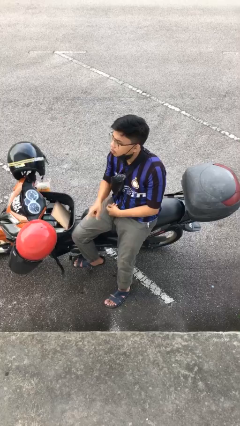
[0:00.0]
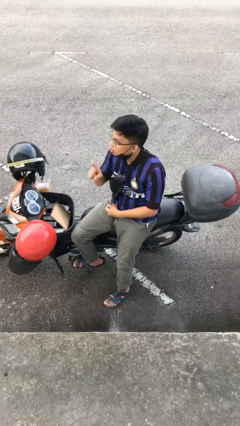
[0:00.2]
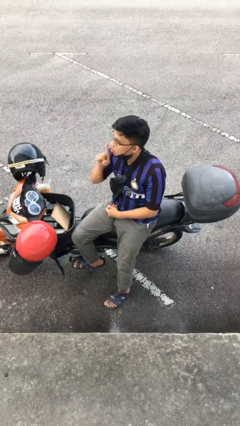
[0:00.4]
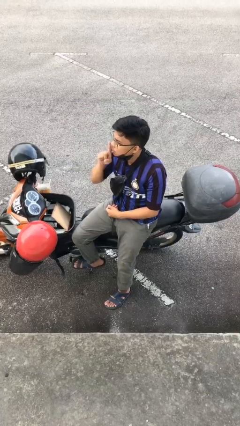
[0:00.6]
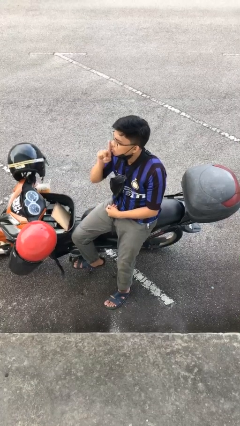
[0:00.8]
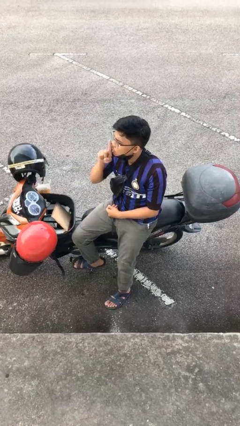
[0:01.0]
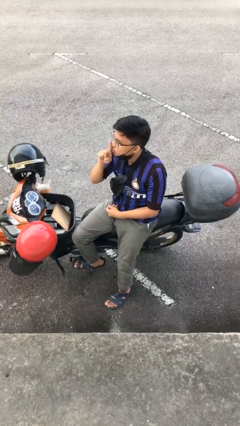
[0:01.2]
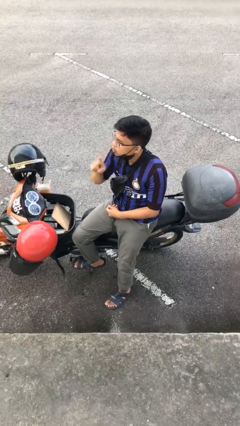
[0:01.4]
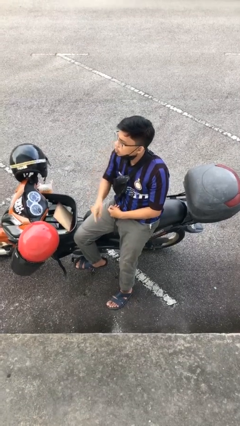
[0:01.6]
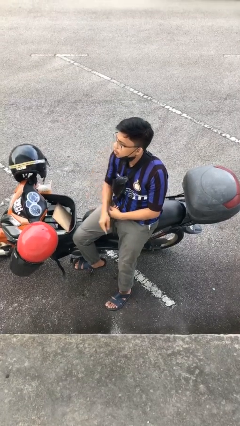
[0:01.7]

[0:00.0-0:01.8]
person gestures be quiet

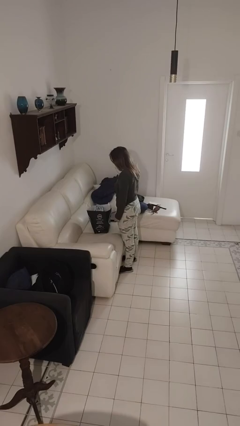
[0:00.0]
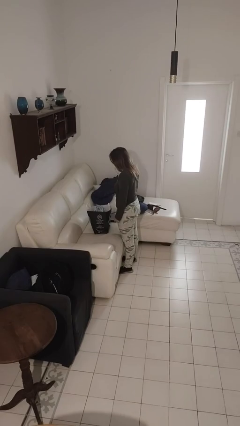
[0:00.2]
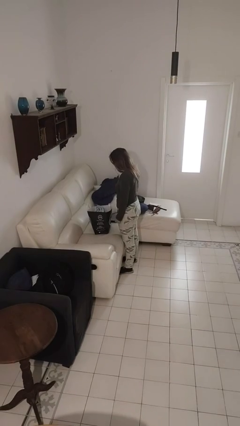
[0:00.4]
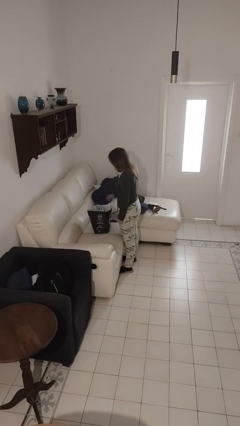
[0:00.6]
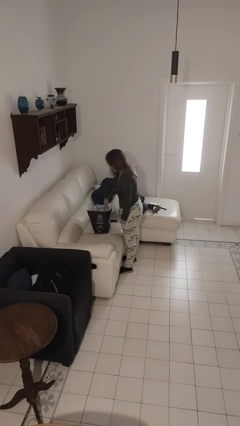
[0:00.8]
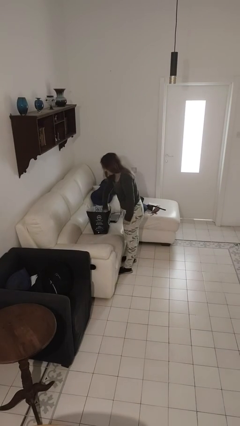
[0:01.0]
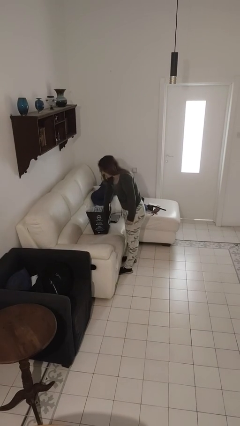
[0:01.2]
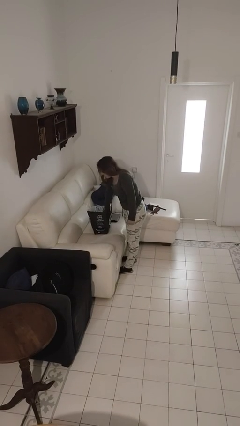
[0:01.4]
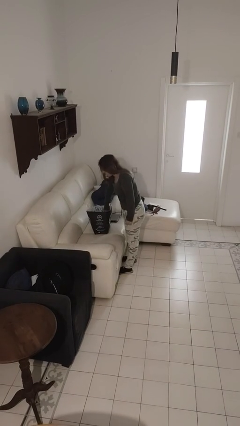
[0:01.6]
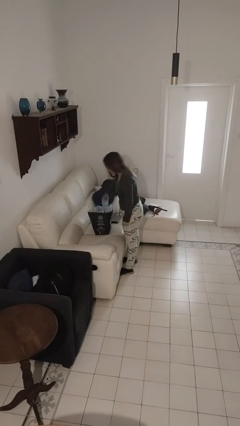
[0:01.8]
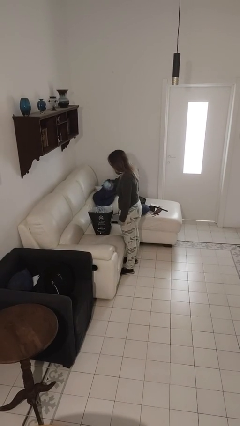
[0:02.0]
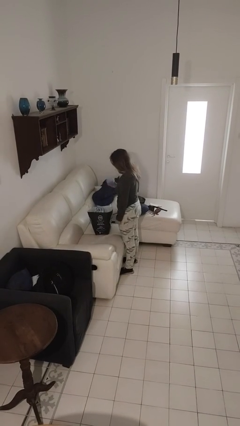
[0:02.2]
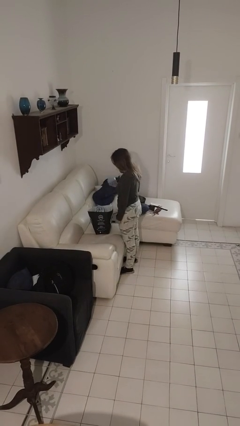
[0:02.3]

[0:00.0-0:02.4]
person takes object from bag

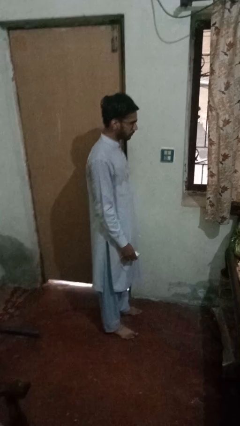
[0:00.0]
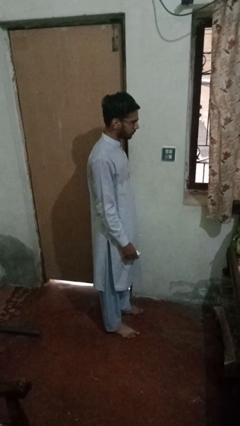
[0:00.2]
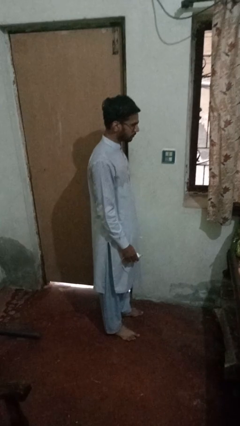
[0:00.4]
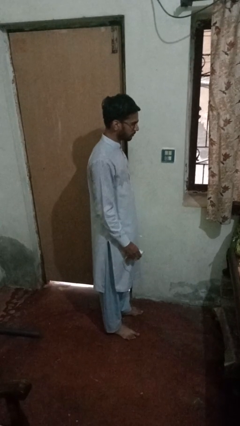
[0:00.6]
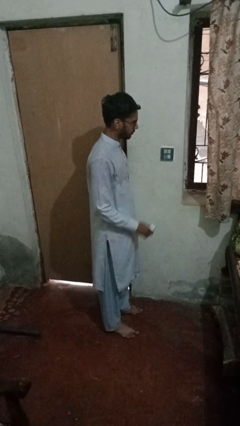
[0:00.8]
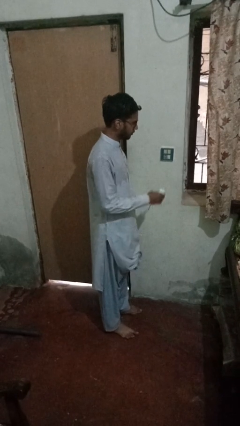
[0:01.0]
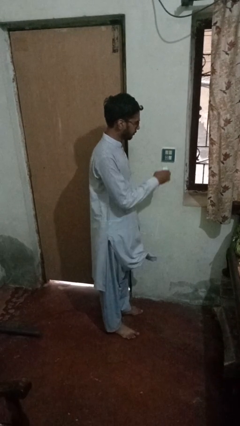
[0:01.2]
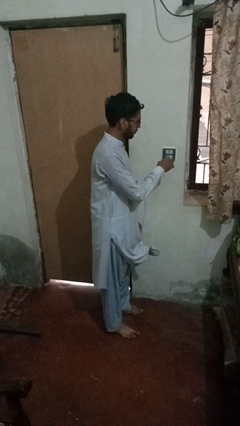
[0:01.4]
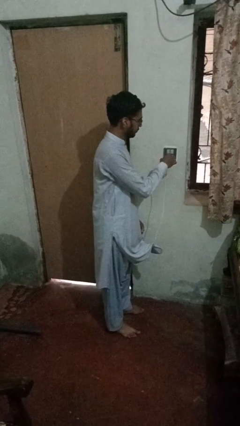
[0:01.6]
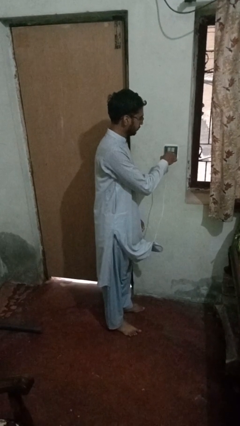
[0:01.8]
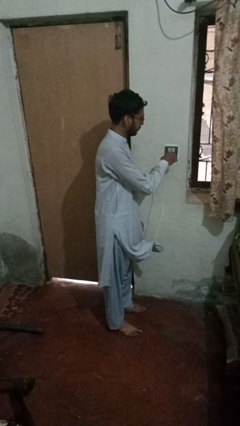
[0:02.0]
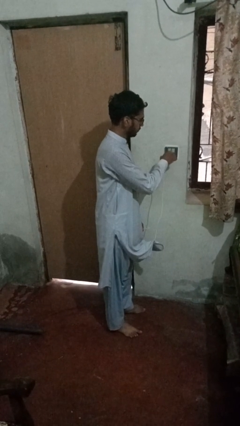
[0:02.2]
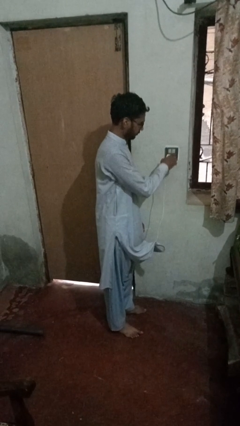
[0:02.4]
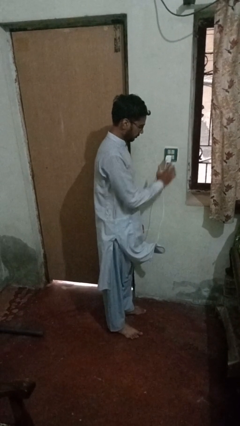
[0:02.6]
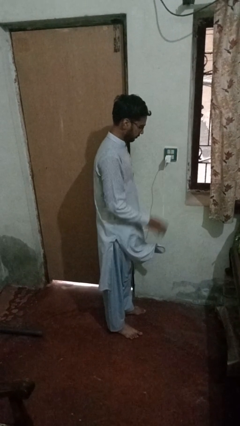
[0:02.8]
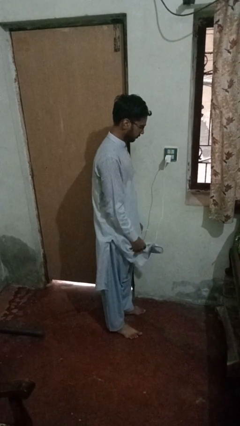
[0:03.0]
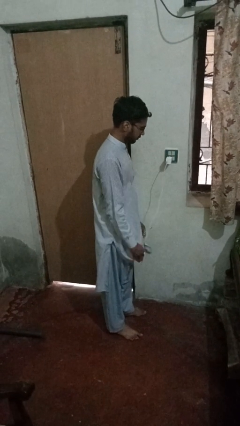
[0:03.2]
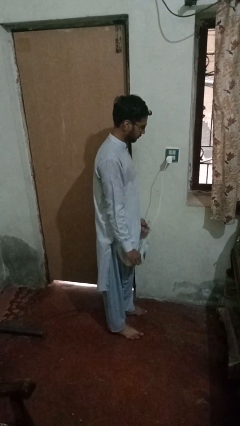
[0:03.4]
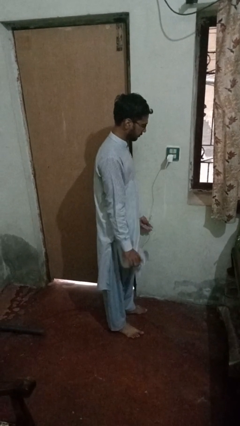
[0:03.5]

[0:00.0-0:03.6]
person plugs into electrical socket

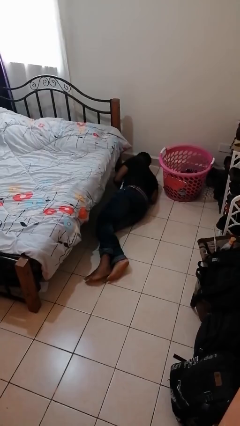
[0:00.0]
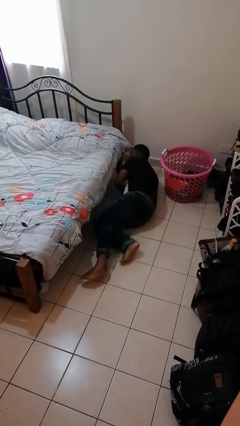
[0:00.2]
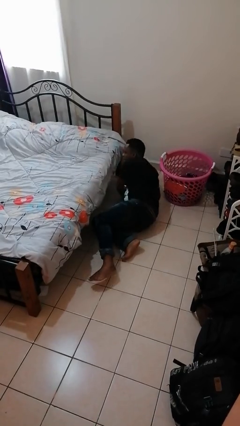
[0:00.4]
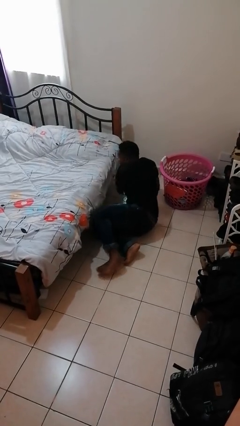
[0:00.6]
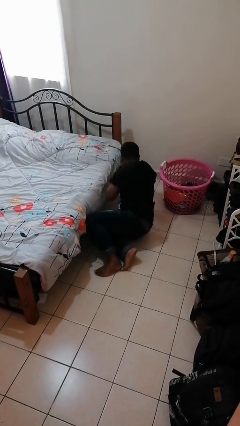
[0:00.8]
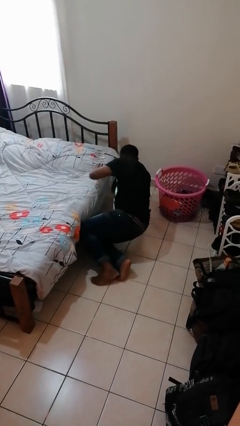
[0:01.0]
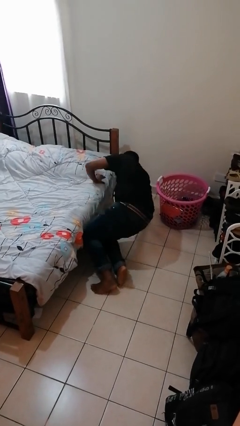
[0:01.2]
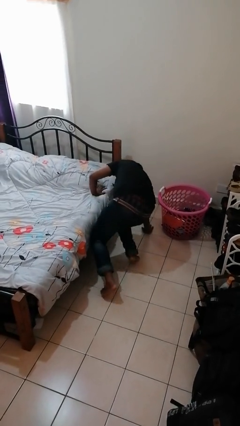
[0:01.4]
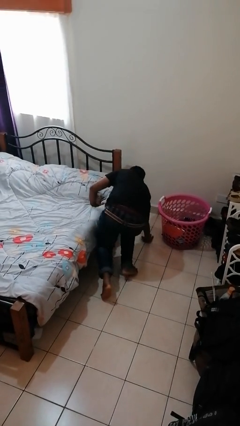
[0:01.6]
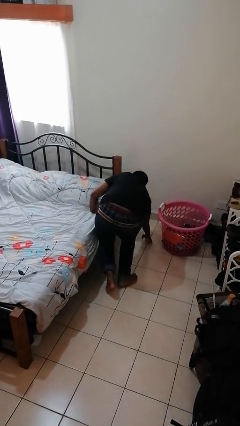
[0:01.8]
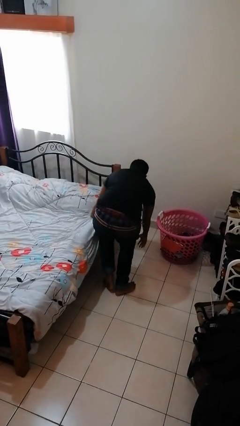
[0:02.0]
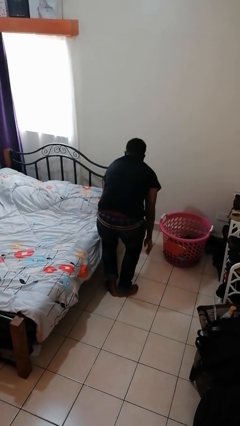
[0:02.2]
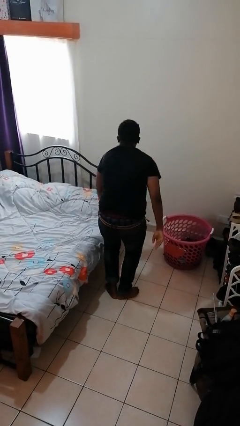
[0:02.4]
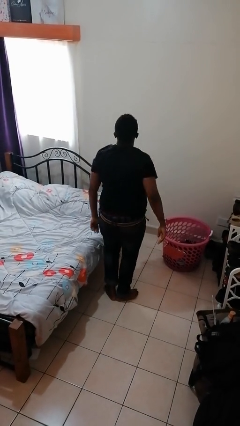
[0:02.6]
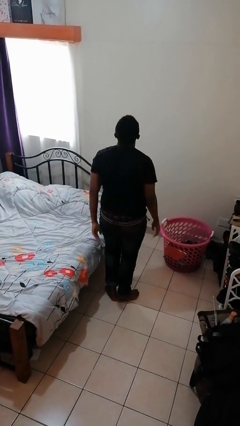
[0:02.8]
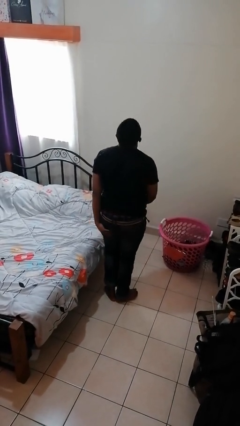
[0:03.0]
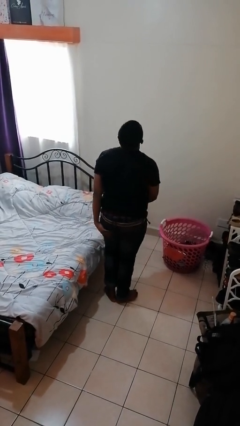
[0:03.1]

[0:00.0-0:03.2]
person stands up from floor

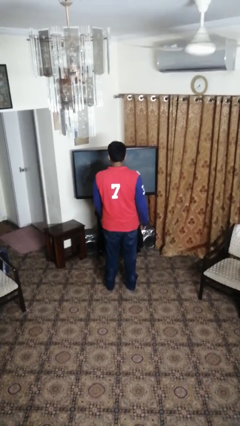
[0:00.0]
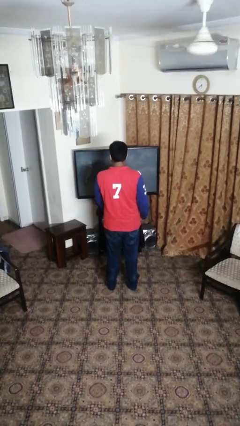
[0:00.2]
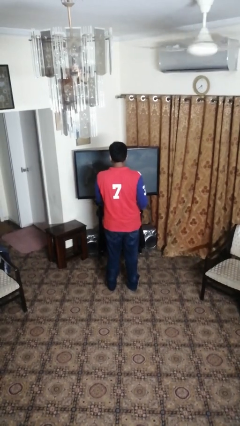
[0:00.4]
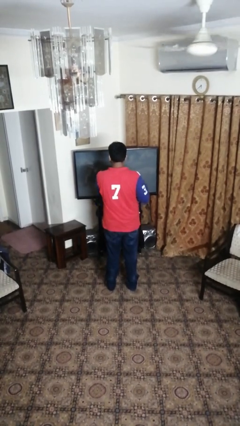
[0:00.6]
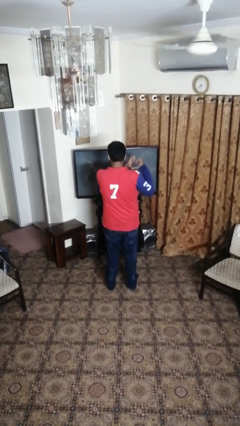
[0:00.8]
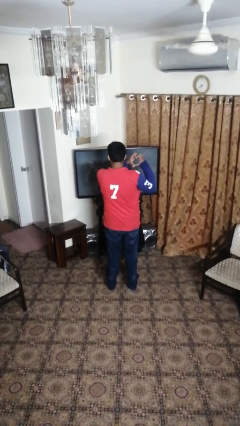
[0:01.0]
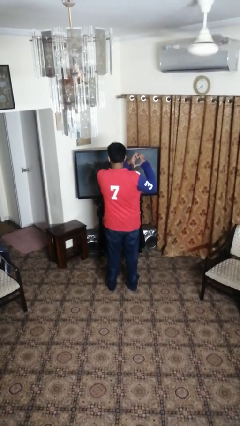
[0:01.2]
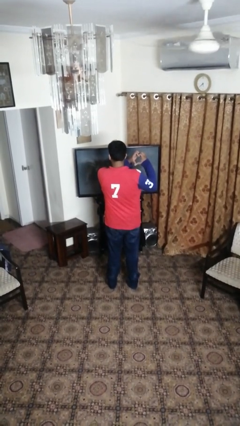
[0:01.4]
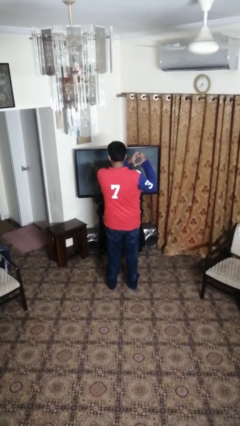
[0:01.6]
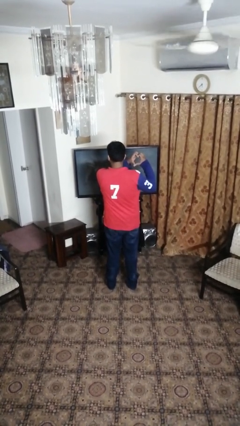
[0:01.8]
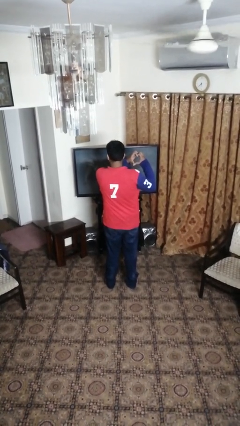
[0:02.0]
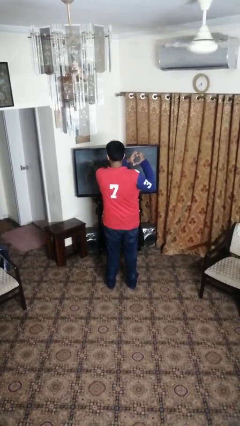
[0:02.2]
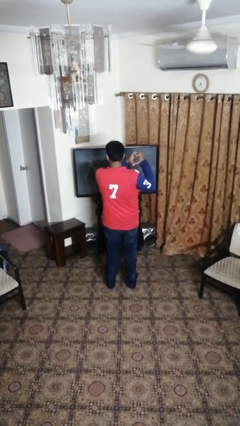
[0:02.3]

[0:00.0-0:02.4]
person gestures heart

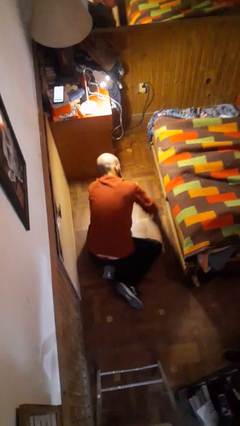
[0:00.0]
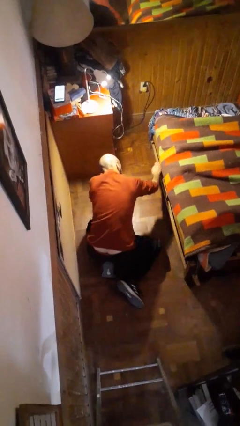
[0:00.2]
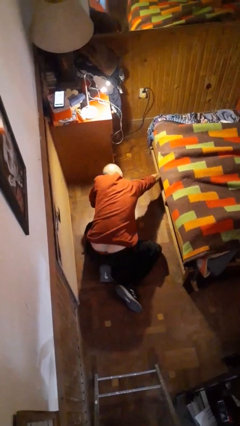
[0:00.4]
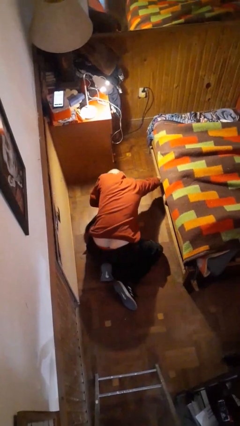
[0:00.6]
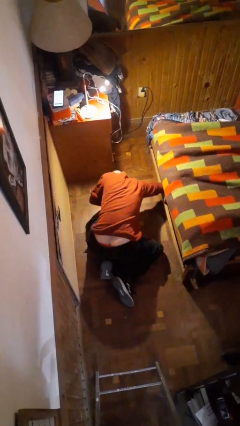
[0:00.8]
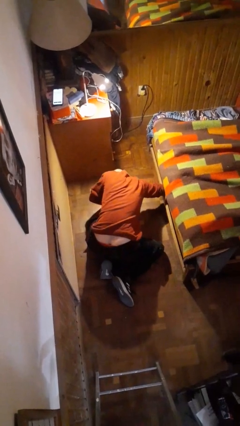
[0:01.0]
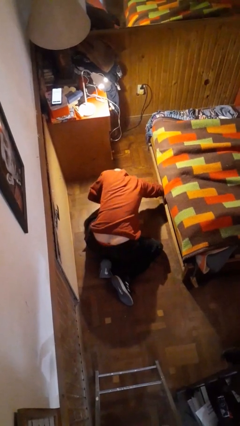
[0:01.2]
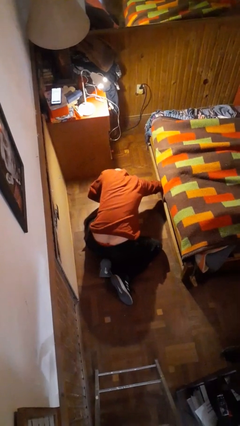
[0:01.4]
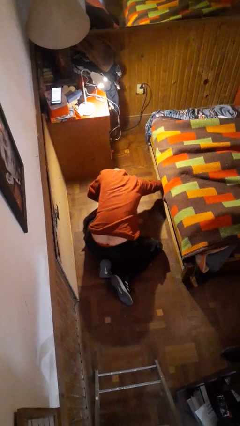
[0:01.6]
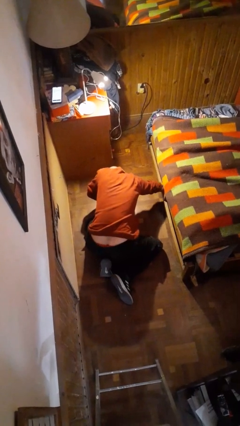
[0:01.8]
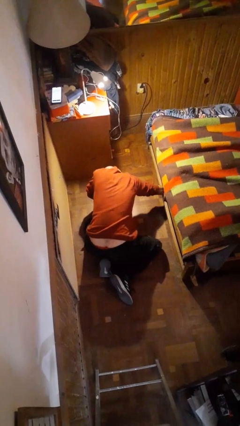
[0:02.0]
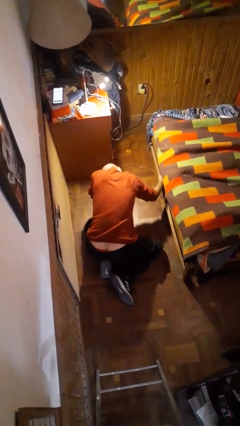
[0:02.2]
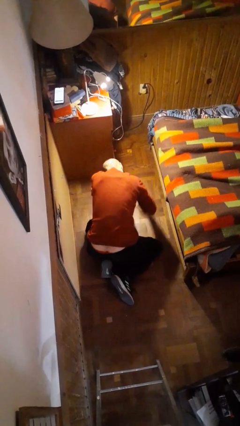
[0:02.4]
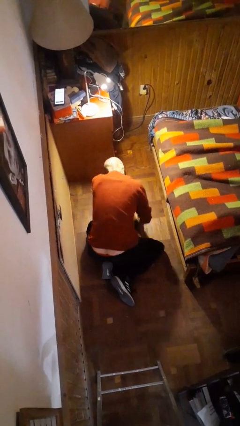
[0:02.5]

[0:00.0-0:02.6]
person searches under bed

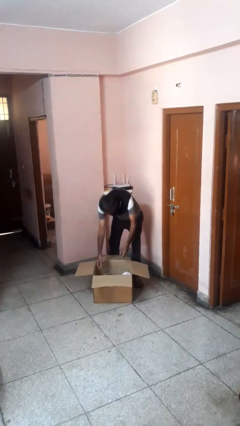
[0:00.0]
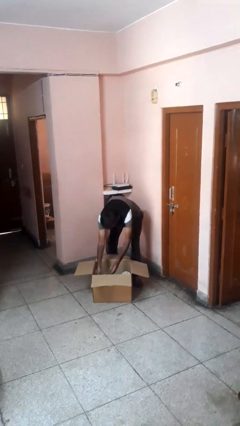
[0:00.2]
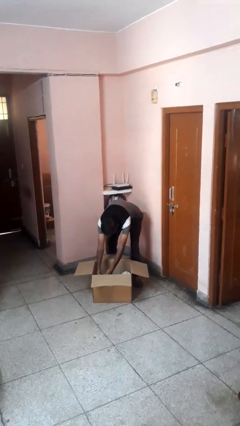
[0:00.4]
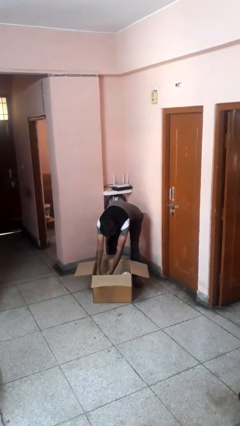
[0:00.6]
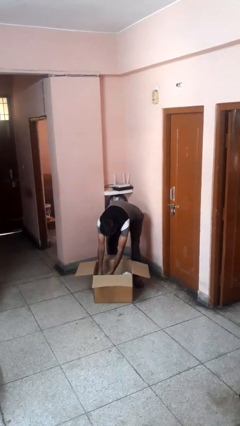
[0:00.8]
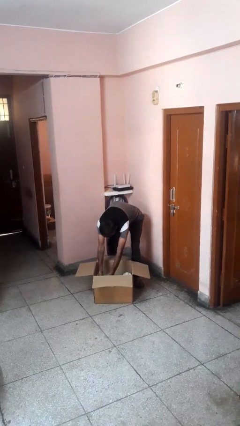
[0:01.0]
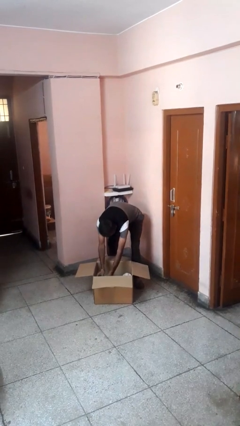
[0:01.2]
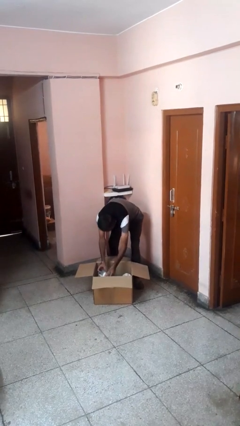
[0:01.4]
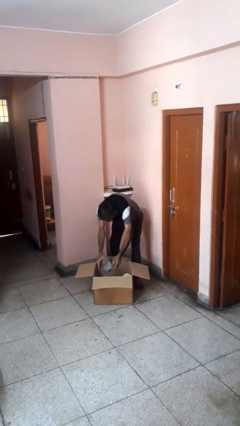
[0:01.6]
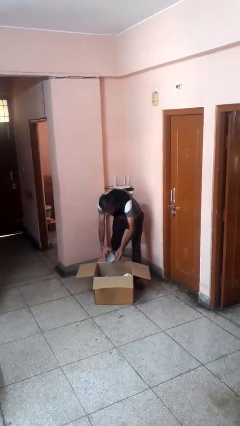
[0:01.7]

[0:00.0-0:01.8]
person takes object from box
